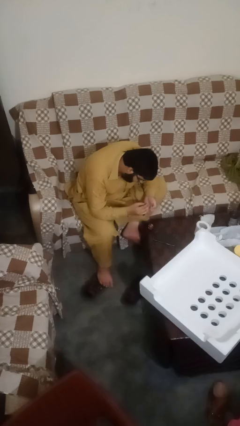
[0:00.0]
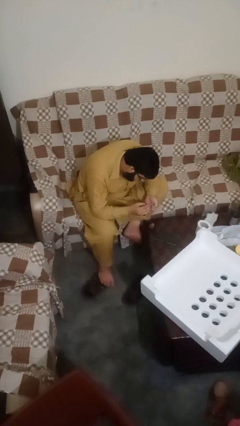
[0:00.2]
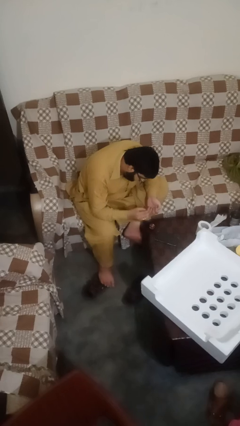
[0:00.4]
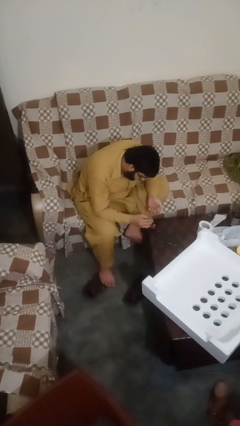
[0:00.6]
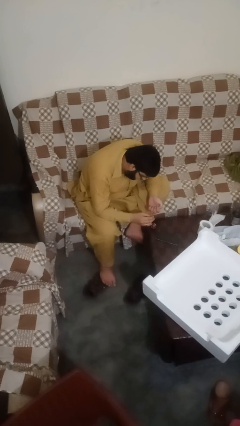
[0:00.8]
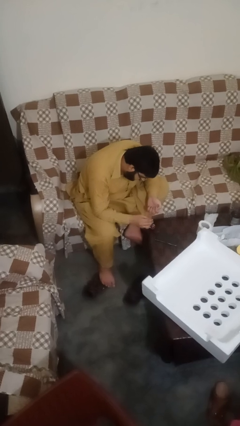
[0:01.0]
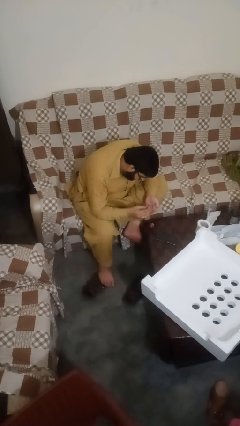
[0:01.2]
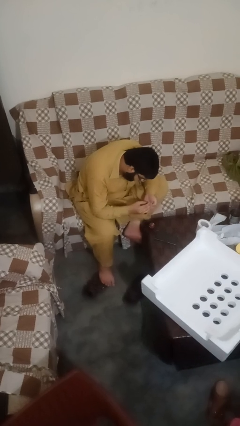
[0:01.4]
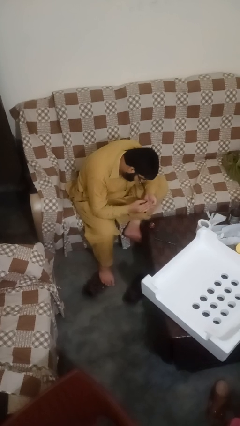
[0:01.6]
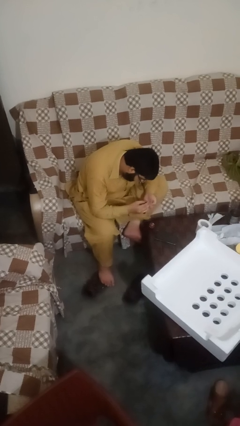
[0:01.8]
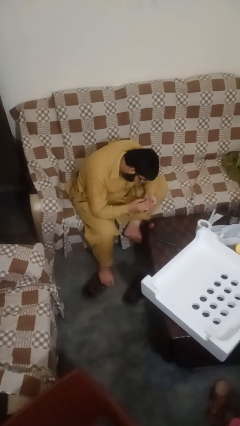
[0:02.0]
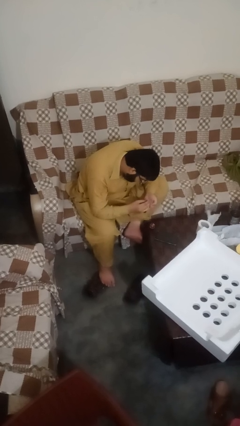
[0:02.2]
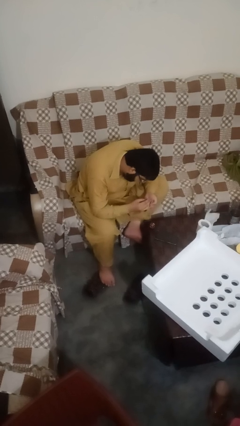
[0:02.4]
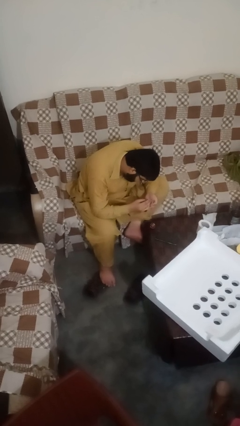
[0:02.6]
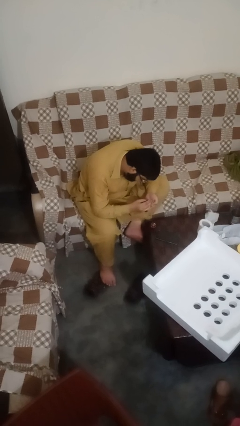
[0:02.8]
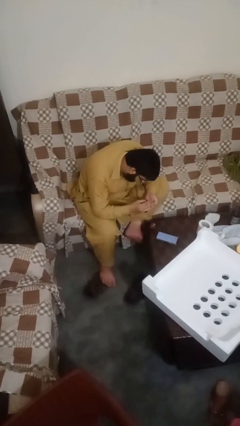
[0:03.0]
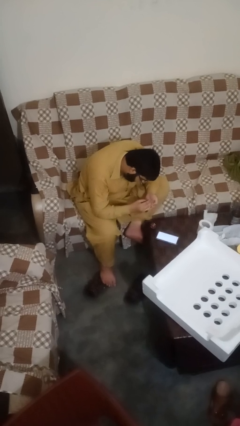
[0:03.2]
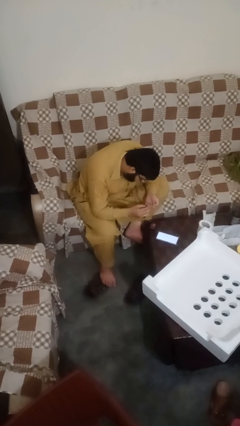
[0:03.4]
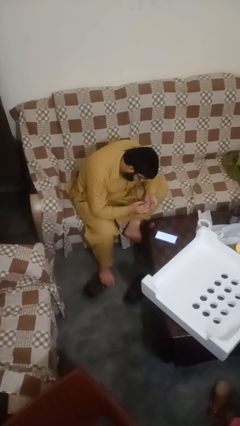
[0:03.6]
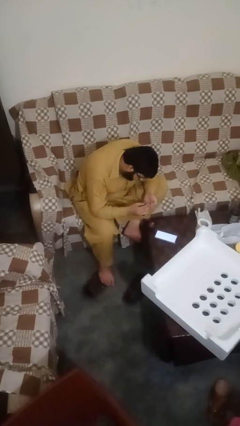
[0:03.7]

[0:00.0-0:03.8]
person paints fingernails

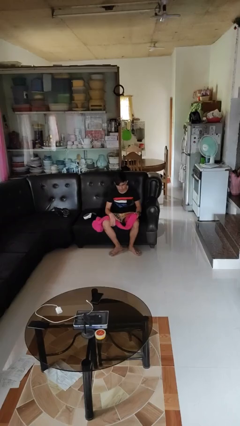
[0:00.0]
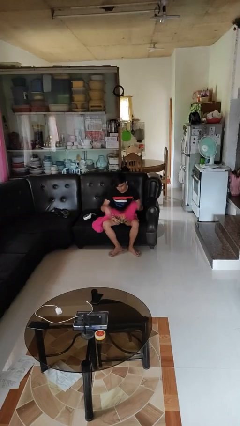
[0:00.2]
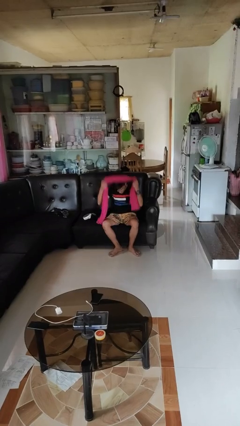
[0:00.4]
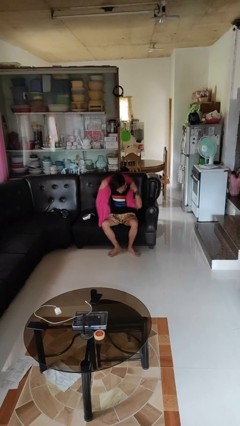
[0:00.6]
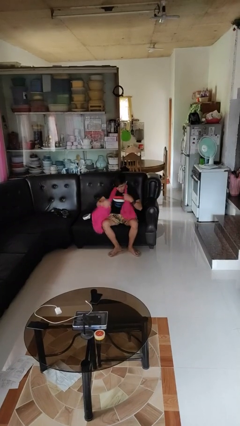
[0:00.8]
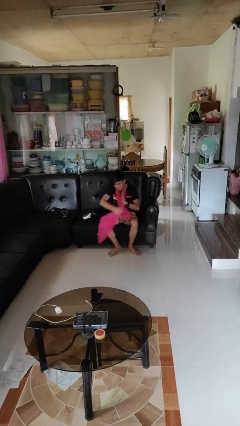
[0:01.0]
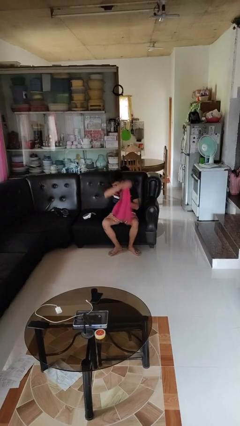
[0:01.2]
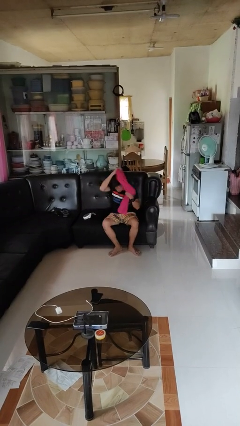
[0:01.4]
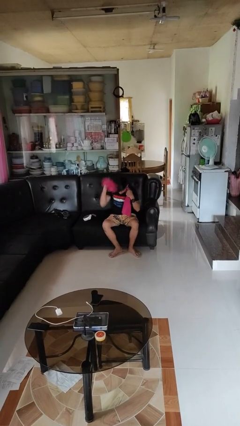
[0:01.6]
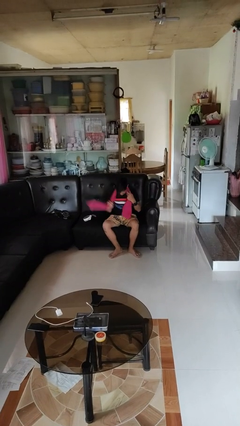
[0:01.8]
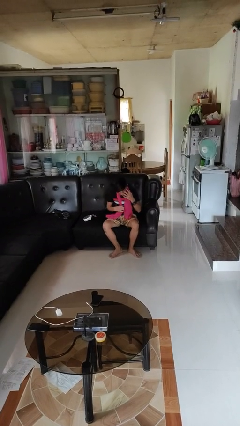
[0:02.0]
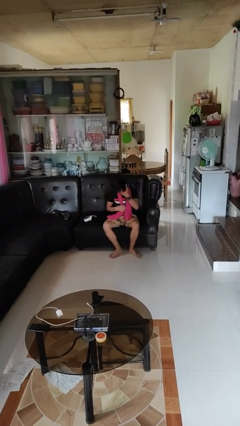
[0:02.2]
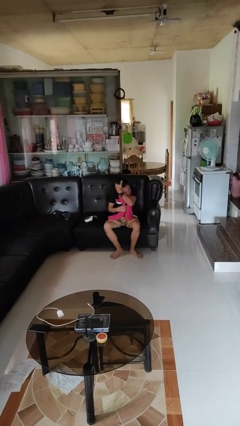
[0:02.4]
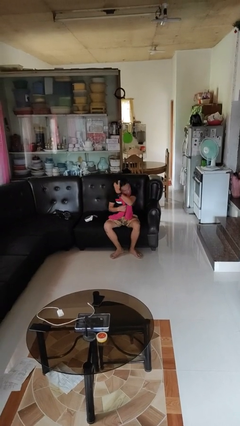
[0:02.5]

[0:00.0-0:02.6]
person puts on scarf

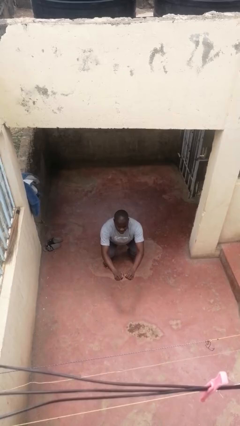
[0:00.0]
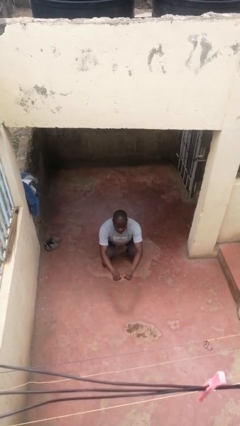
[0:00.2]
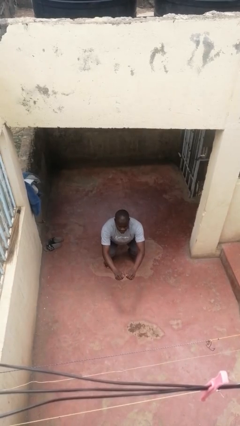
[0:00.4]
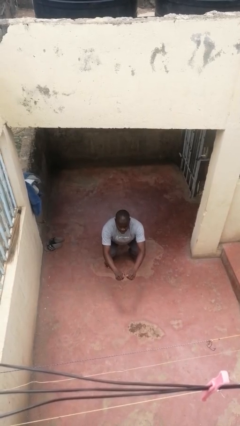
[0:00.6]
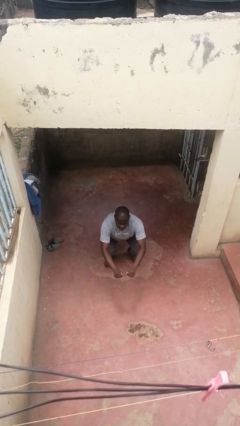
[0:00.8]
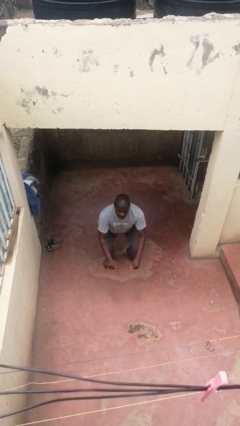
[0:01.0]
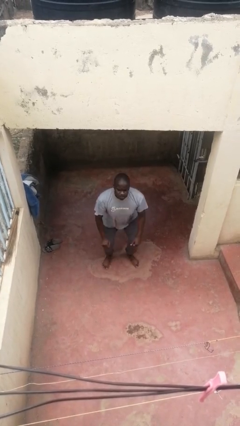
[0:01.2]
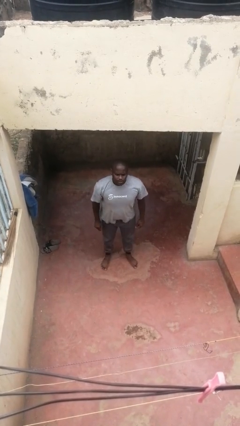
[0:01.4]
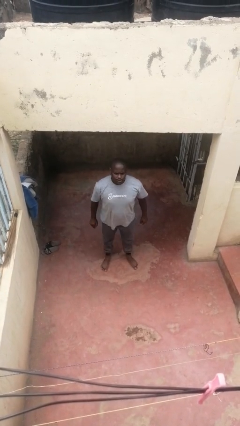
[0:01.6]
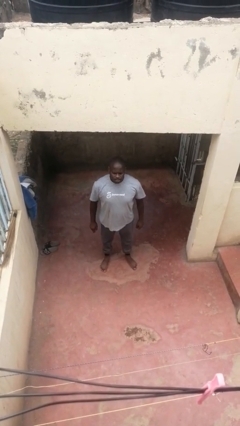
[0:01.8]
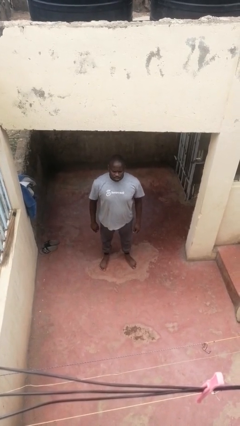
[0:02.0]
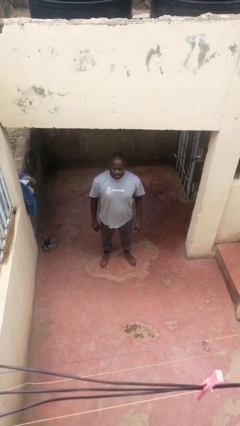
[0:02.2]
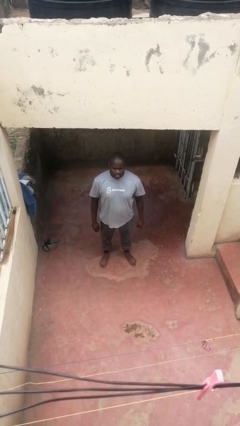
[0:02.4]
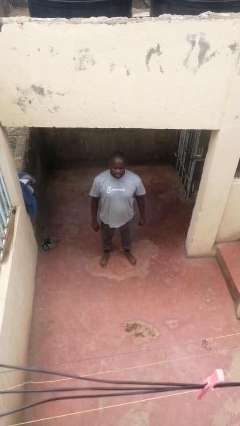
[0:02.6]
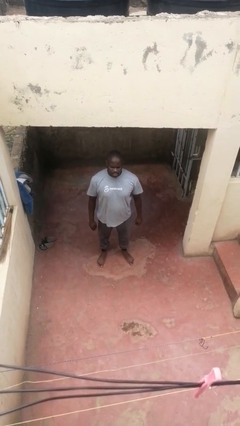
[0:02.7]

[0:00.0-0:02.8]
person stands up

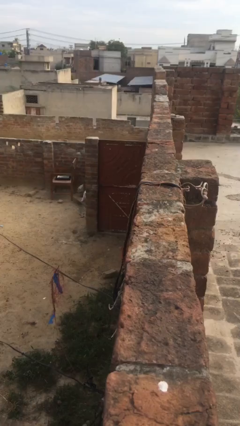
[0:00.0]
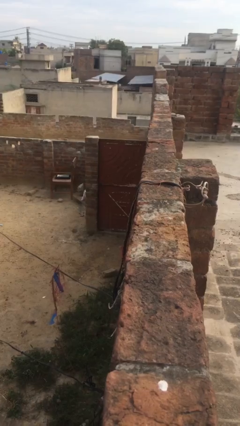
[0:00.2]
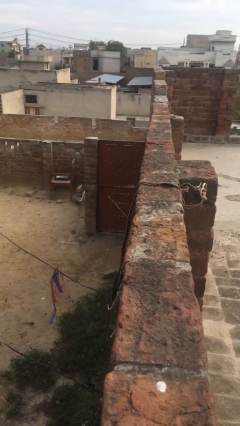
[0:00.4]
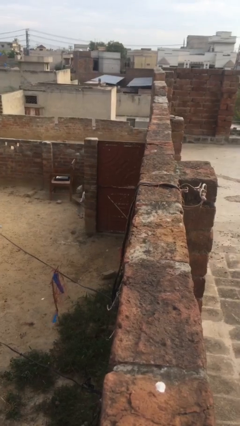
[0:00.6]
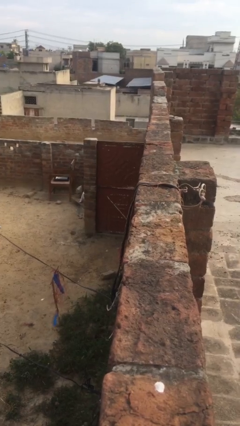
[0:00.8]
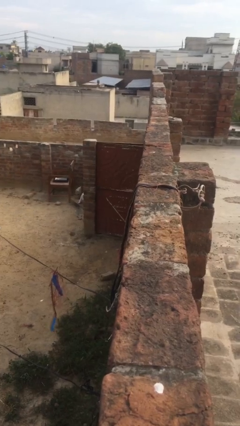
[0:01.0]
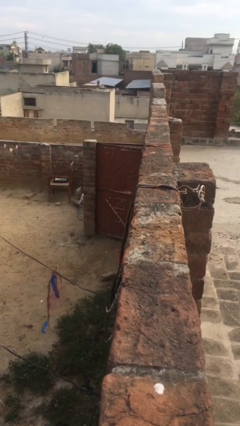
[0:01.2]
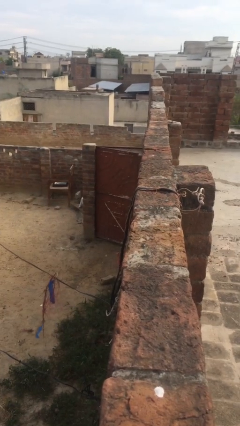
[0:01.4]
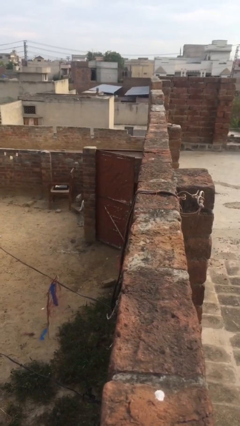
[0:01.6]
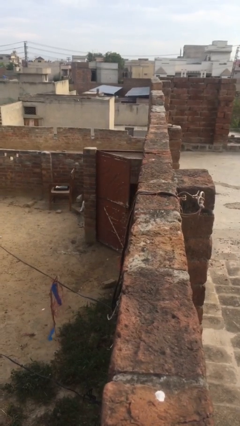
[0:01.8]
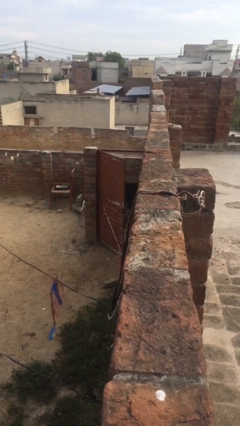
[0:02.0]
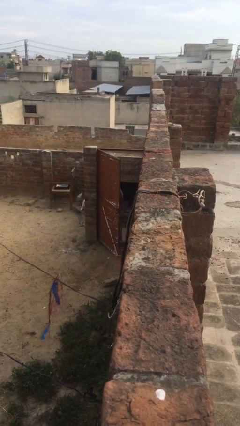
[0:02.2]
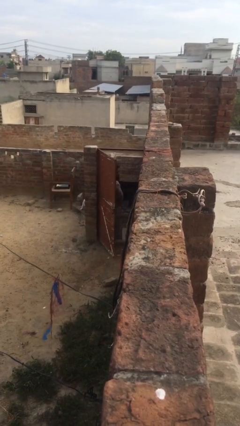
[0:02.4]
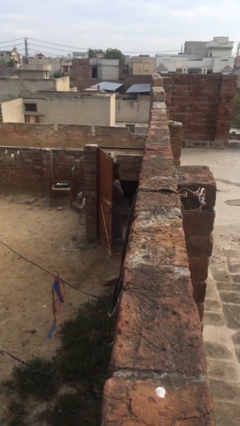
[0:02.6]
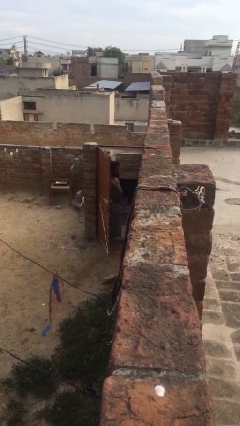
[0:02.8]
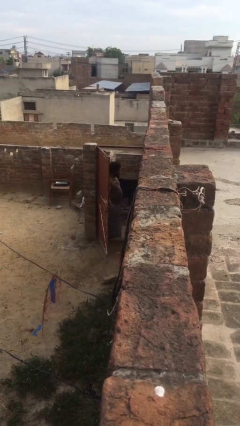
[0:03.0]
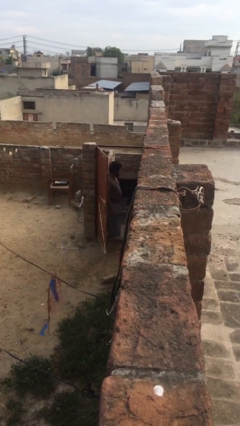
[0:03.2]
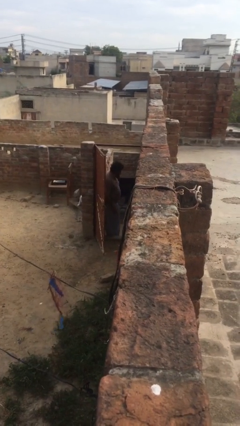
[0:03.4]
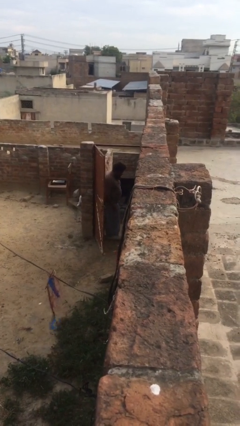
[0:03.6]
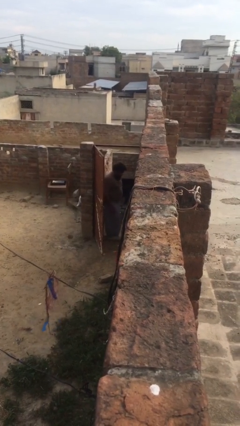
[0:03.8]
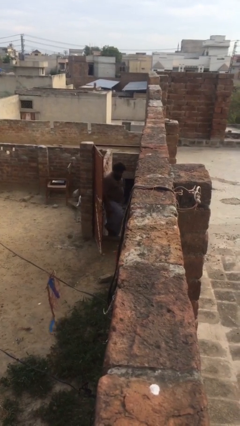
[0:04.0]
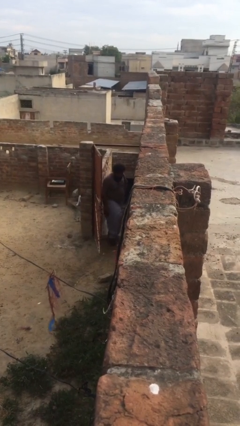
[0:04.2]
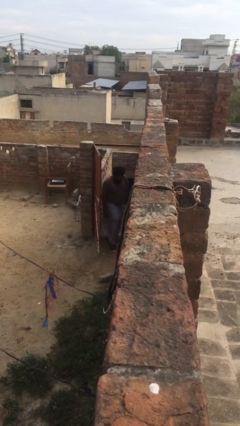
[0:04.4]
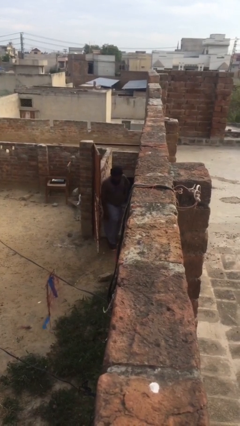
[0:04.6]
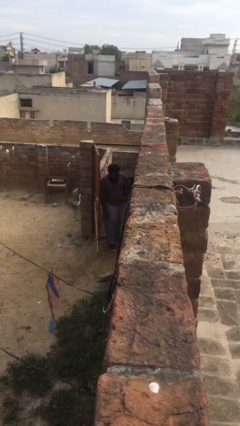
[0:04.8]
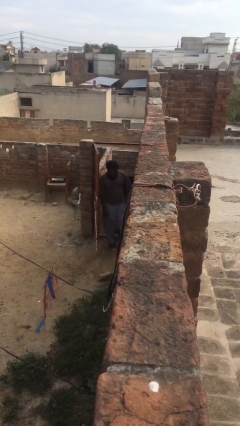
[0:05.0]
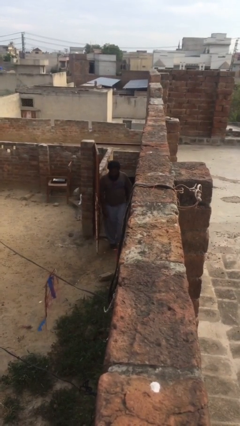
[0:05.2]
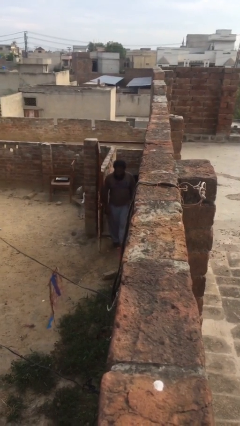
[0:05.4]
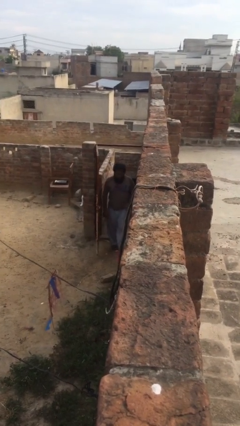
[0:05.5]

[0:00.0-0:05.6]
person enters scene through structure

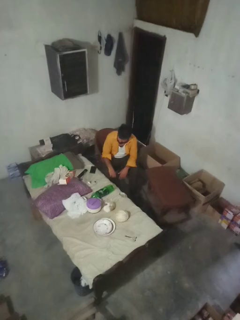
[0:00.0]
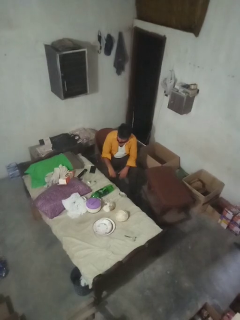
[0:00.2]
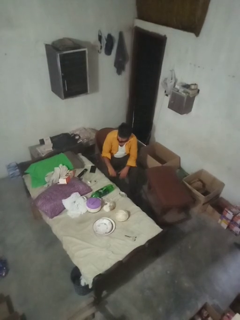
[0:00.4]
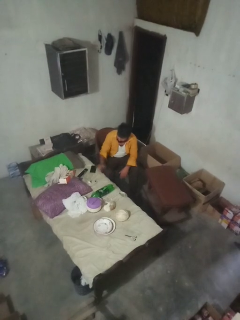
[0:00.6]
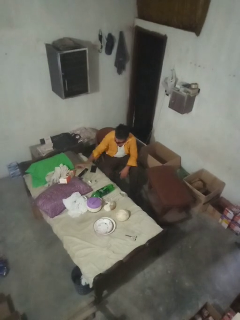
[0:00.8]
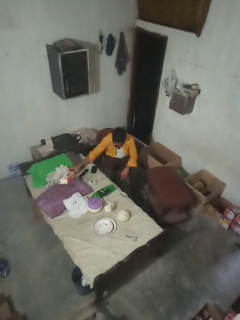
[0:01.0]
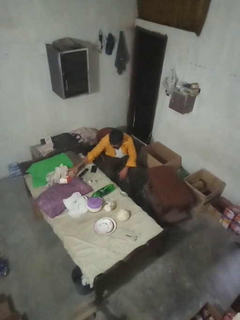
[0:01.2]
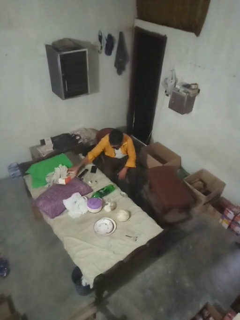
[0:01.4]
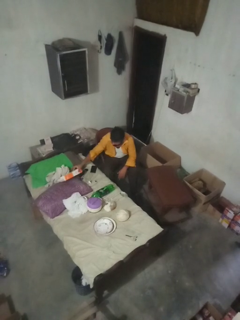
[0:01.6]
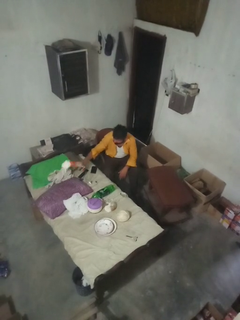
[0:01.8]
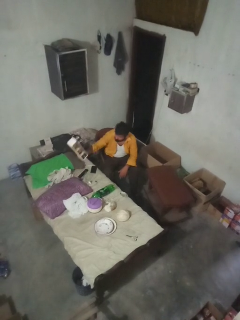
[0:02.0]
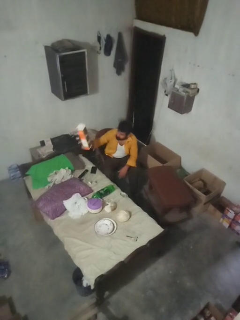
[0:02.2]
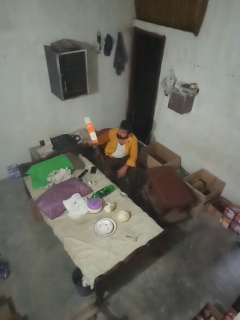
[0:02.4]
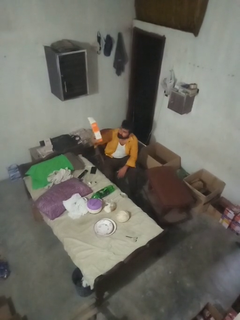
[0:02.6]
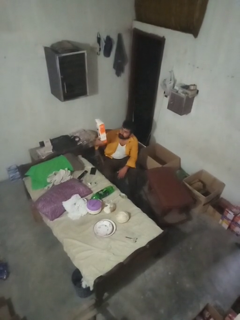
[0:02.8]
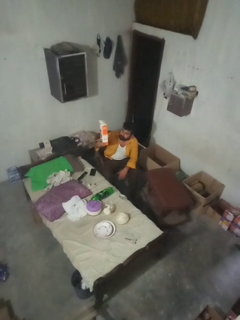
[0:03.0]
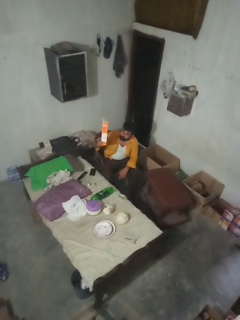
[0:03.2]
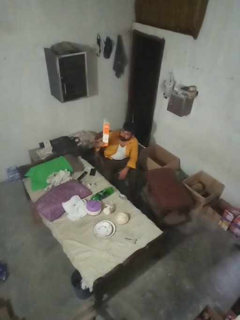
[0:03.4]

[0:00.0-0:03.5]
person picks up object from bed

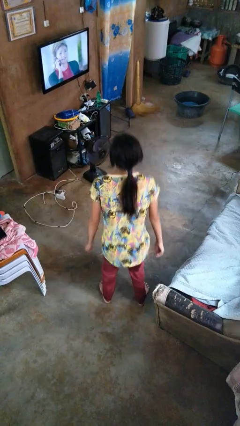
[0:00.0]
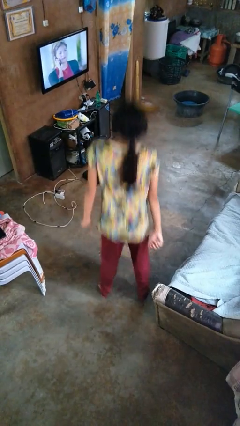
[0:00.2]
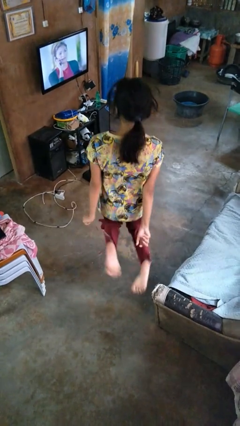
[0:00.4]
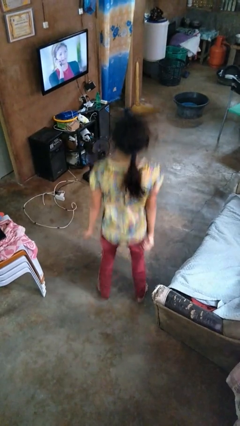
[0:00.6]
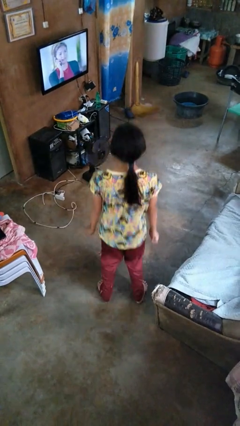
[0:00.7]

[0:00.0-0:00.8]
person jumps
